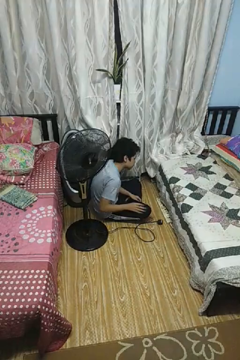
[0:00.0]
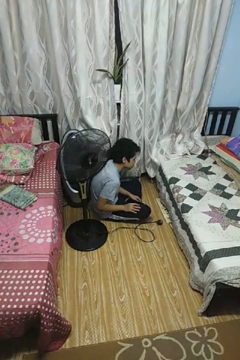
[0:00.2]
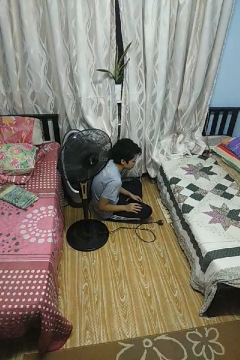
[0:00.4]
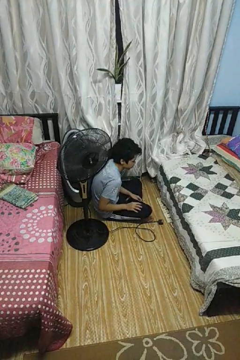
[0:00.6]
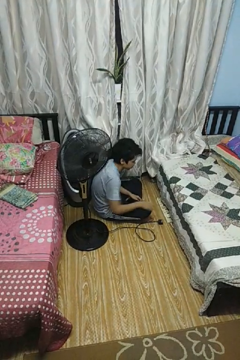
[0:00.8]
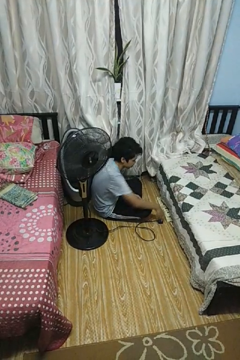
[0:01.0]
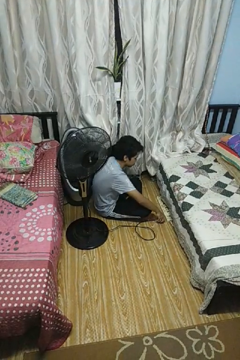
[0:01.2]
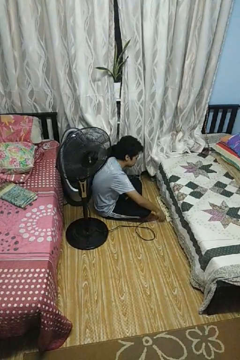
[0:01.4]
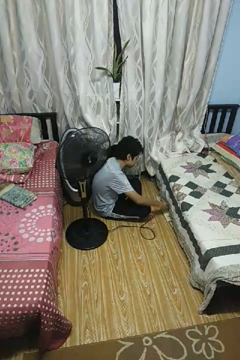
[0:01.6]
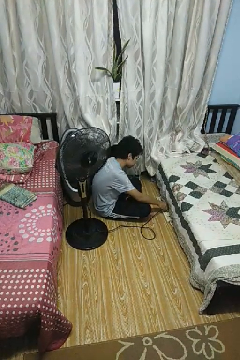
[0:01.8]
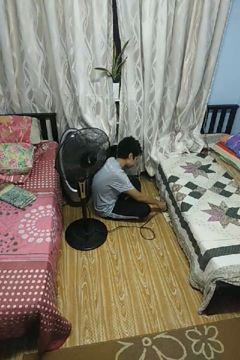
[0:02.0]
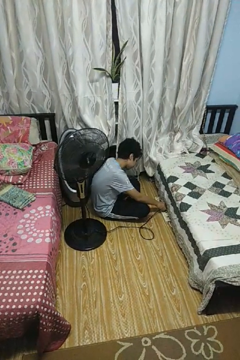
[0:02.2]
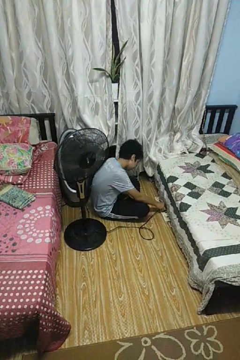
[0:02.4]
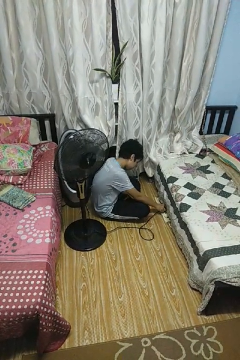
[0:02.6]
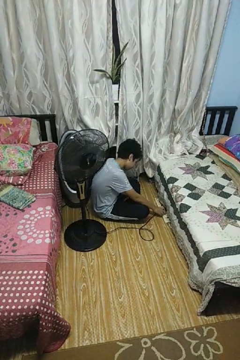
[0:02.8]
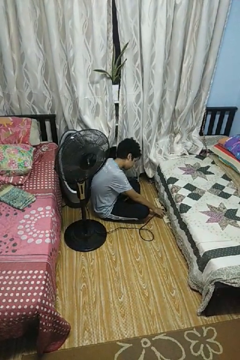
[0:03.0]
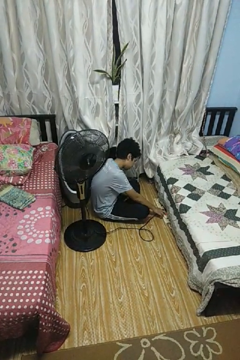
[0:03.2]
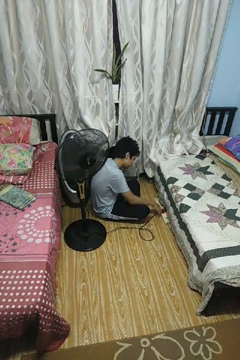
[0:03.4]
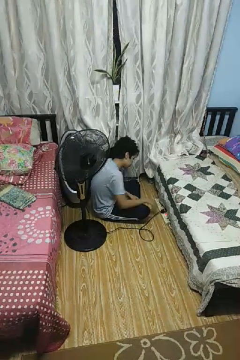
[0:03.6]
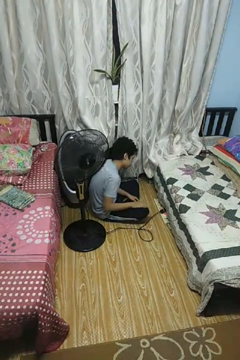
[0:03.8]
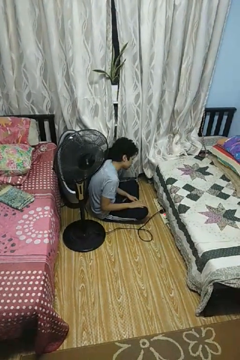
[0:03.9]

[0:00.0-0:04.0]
person plugs into electrical socket

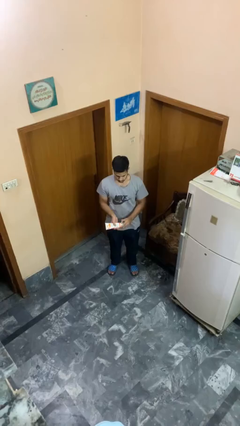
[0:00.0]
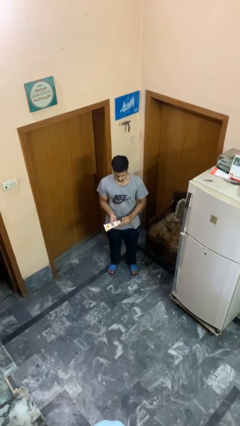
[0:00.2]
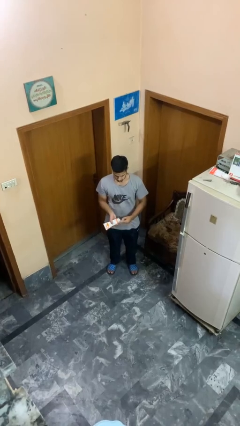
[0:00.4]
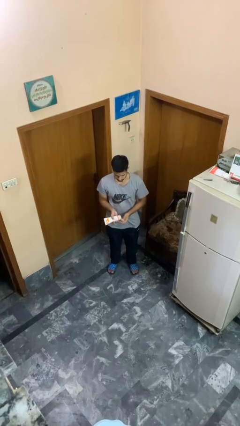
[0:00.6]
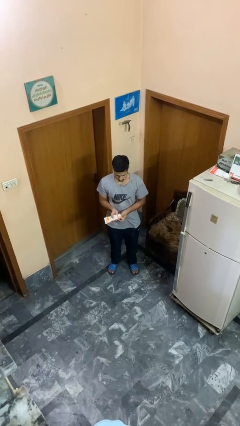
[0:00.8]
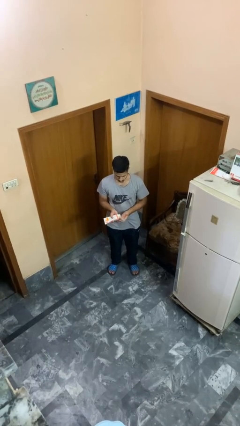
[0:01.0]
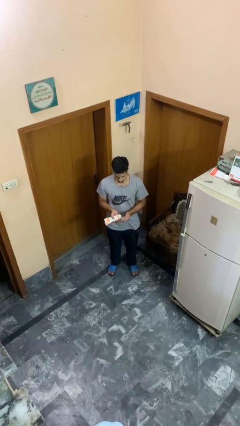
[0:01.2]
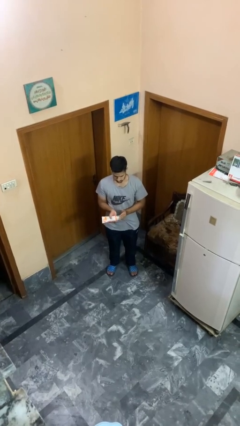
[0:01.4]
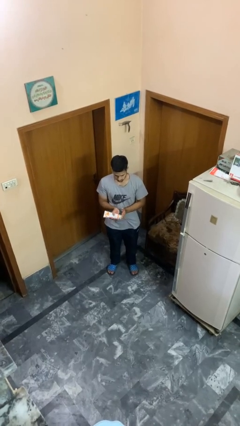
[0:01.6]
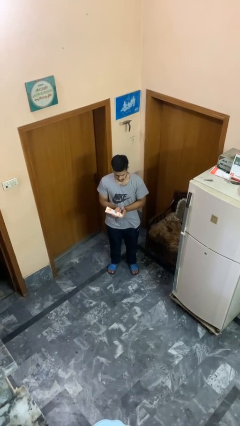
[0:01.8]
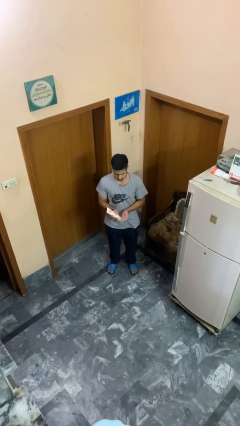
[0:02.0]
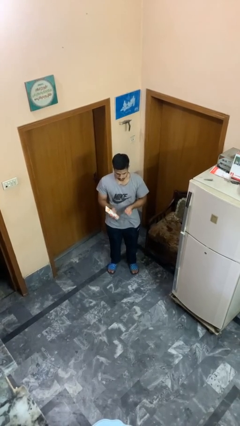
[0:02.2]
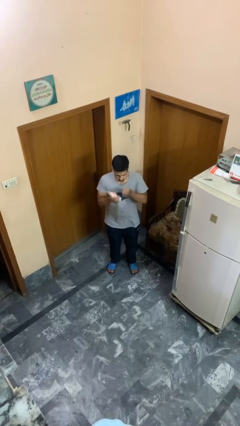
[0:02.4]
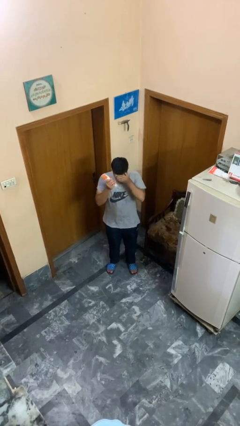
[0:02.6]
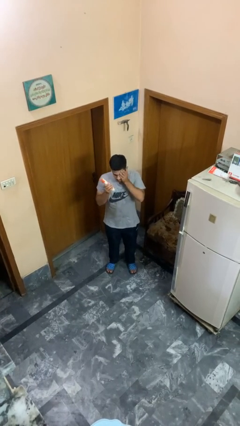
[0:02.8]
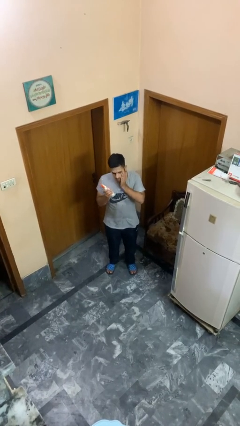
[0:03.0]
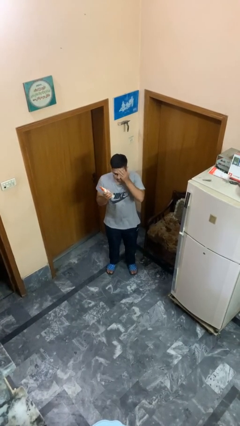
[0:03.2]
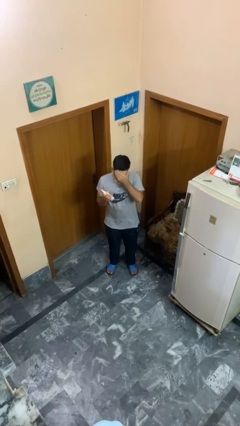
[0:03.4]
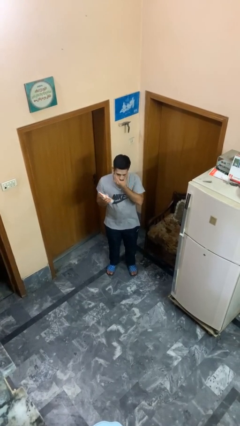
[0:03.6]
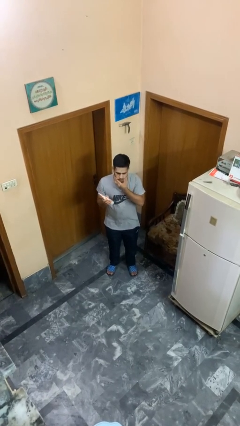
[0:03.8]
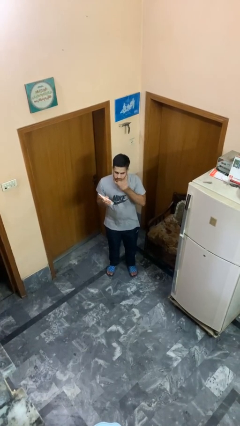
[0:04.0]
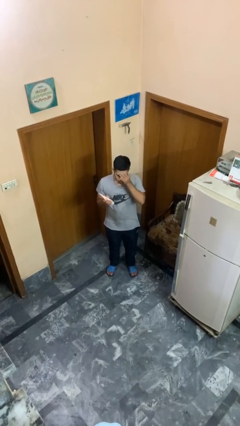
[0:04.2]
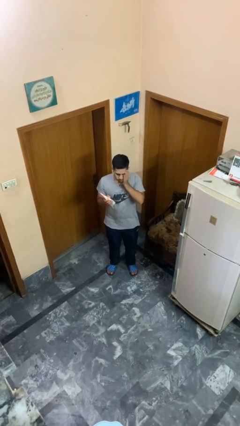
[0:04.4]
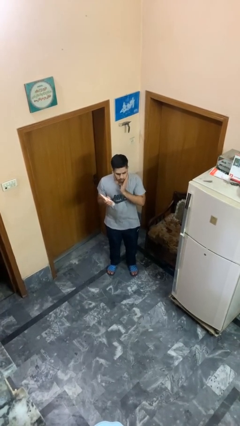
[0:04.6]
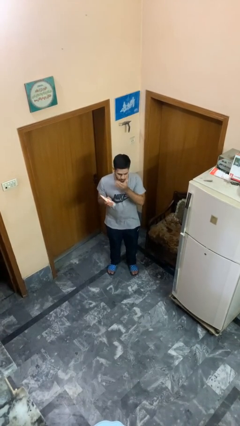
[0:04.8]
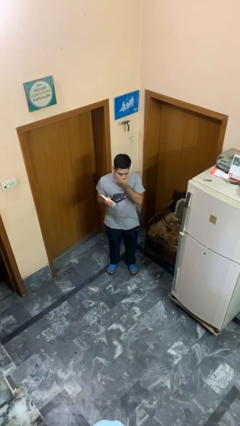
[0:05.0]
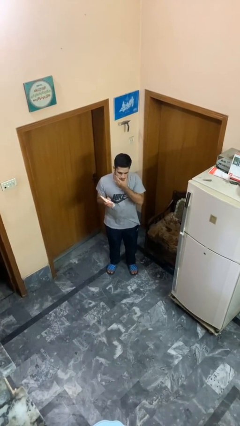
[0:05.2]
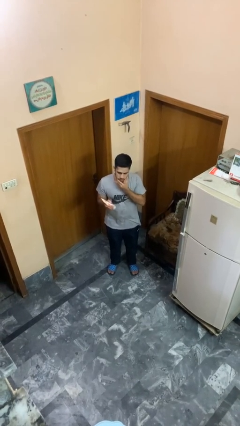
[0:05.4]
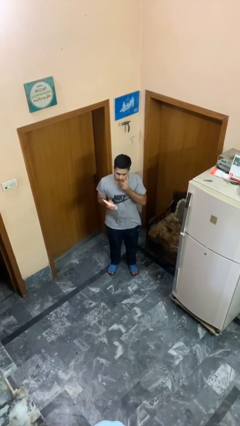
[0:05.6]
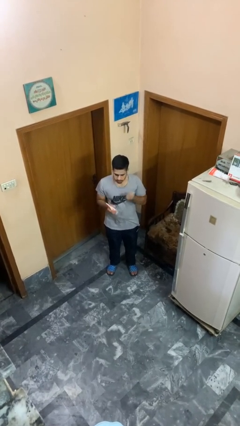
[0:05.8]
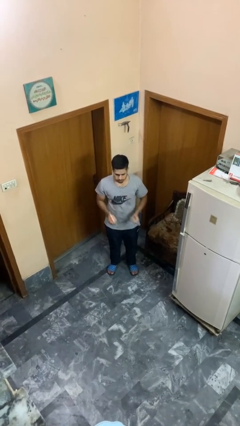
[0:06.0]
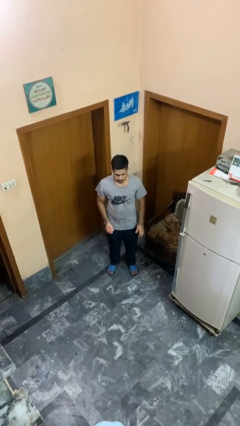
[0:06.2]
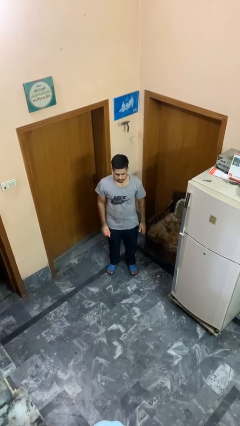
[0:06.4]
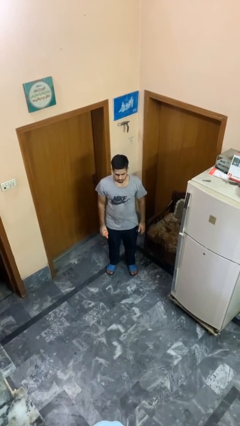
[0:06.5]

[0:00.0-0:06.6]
person applies sunscreen

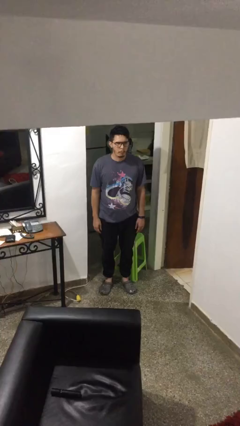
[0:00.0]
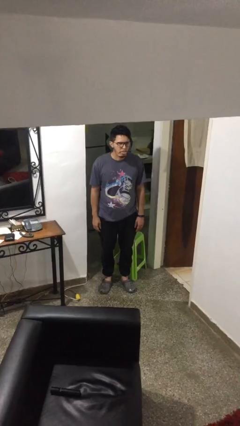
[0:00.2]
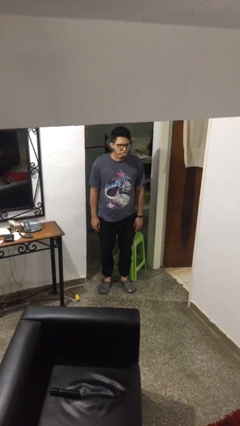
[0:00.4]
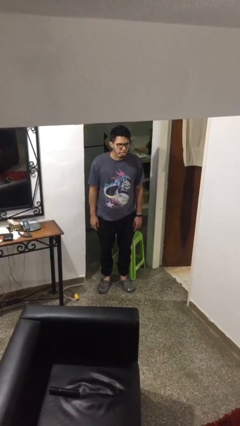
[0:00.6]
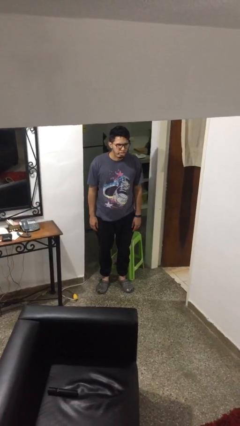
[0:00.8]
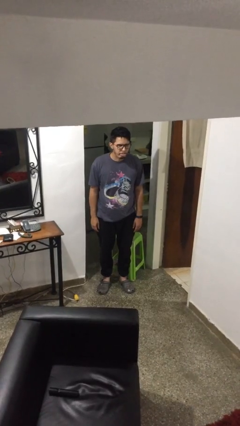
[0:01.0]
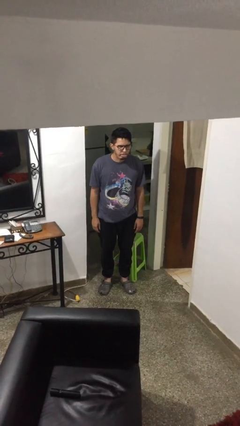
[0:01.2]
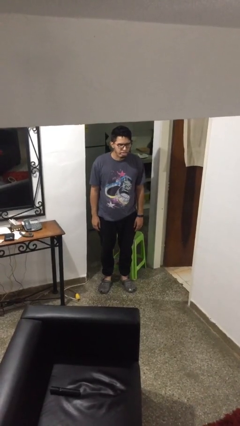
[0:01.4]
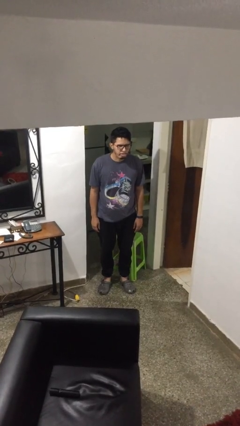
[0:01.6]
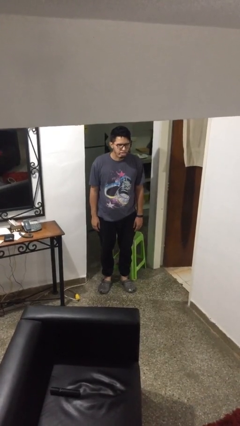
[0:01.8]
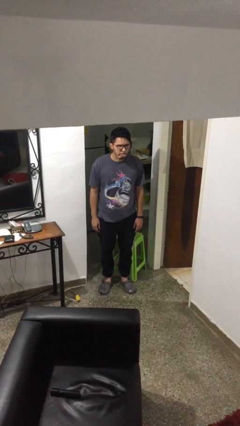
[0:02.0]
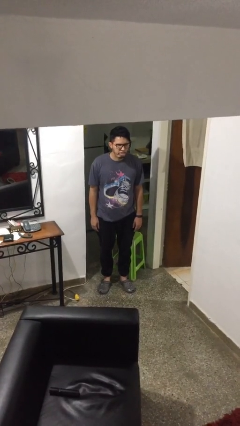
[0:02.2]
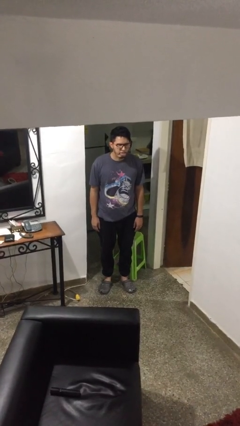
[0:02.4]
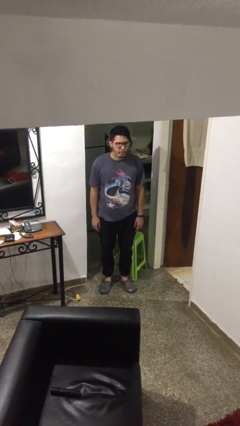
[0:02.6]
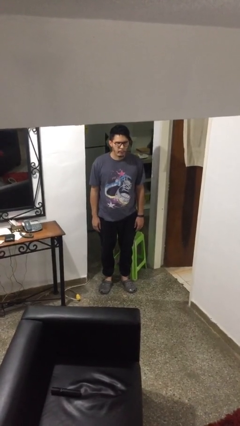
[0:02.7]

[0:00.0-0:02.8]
person sticks out tongue

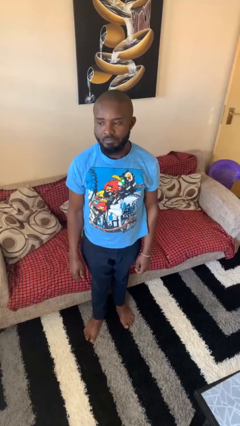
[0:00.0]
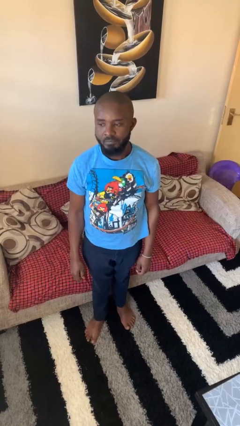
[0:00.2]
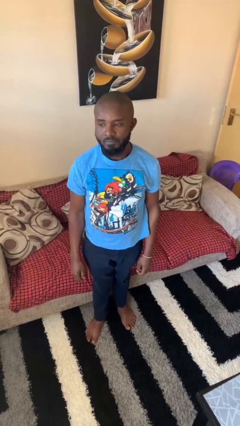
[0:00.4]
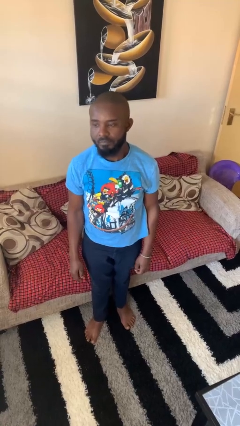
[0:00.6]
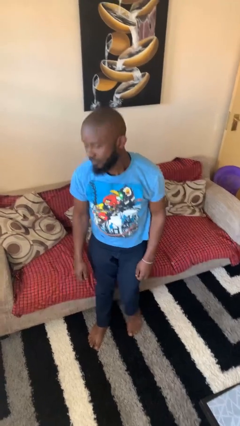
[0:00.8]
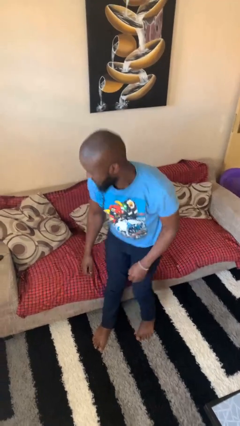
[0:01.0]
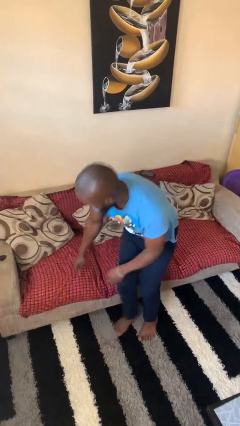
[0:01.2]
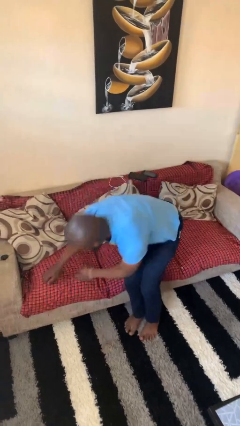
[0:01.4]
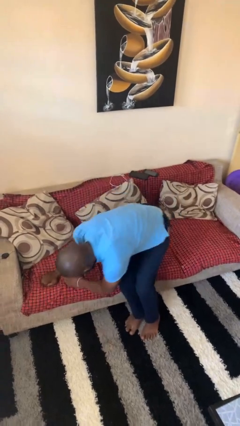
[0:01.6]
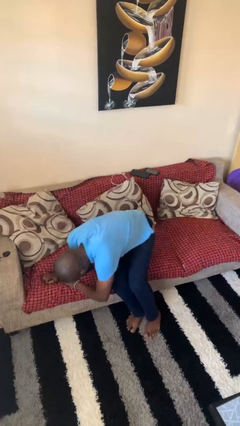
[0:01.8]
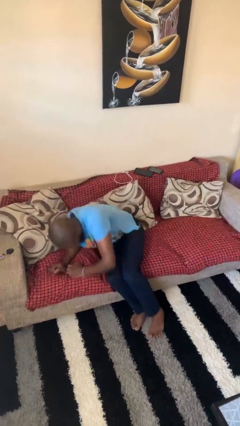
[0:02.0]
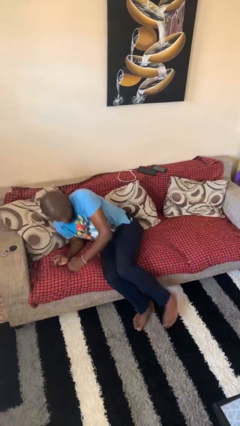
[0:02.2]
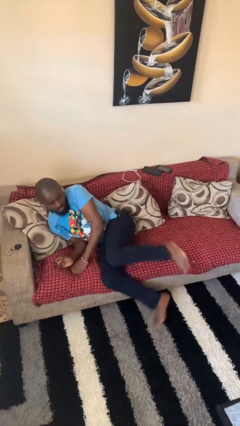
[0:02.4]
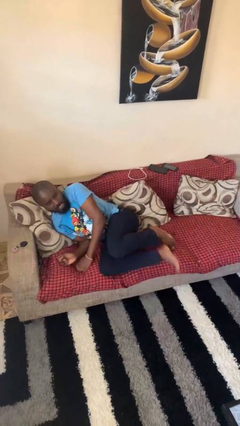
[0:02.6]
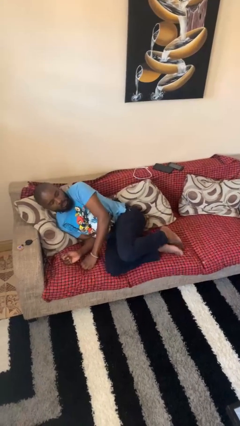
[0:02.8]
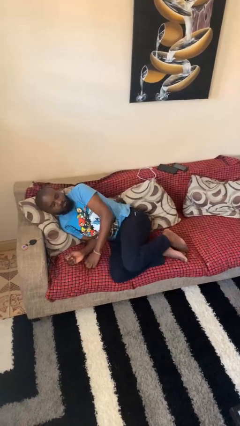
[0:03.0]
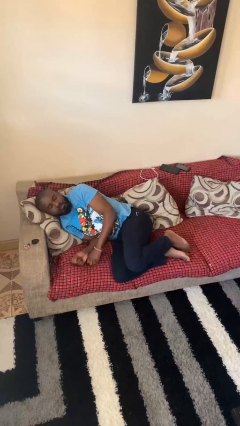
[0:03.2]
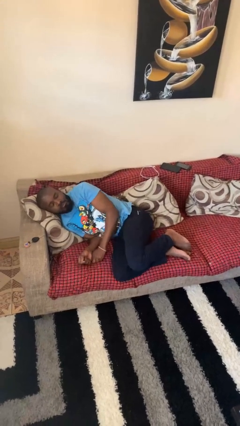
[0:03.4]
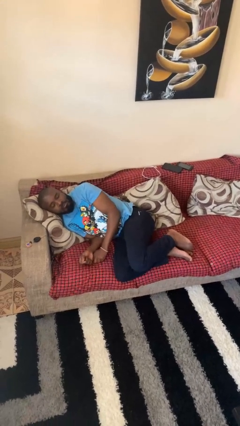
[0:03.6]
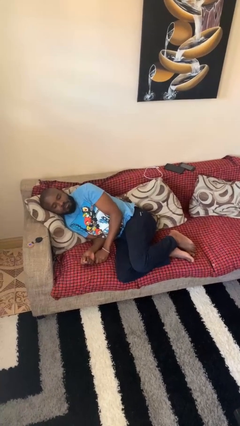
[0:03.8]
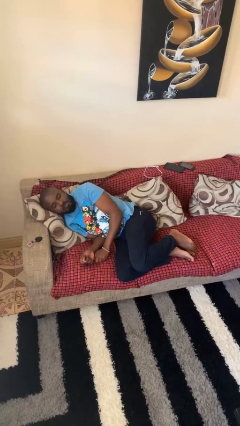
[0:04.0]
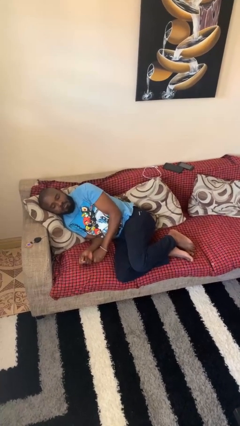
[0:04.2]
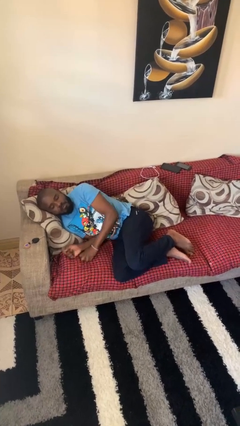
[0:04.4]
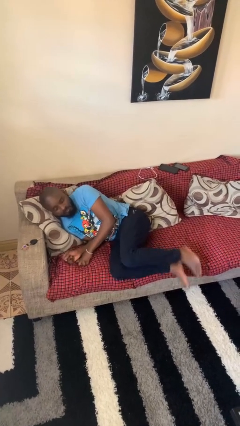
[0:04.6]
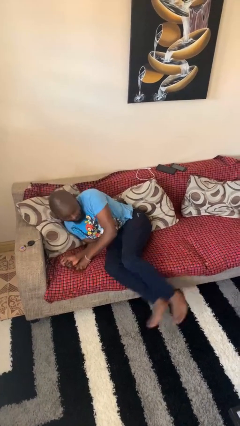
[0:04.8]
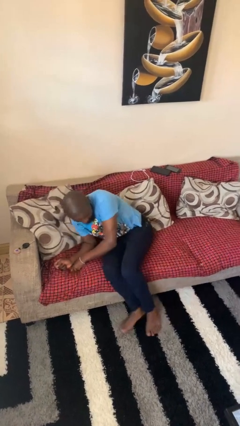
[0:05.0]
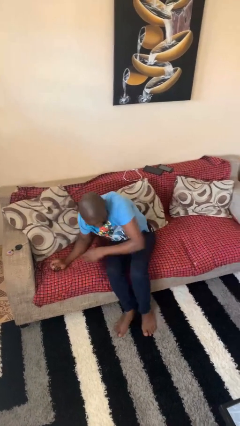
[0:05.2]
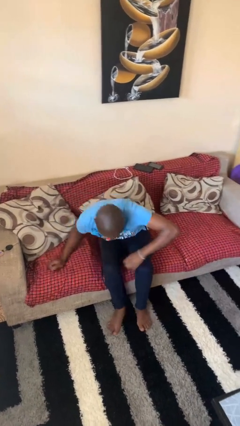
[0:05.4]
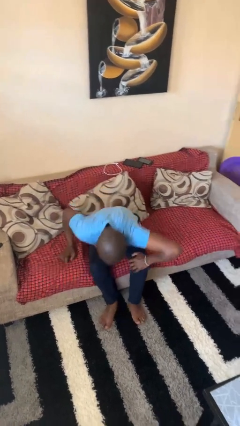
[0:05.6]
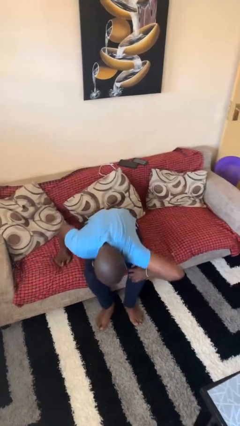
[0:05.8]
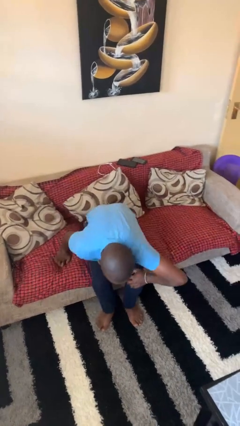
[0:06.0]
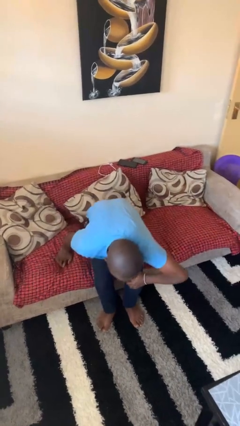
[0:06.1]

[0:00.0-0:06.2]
person lies down on couch
